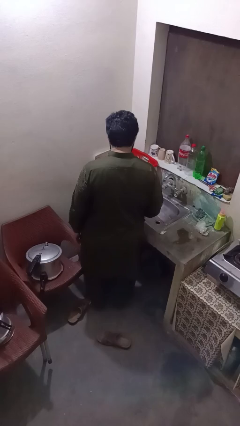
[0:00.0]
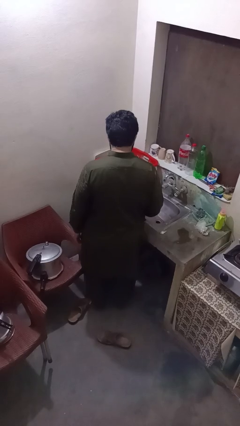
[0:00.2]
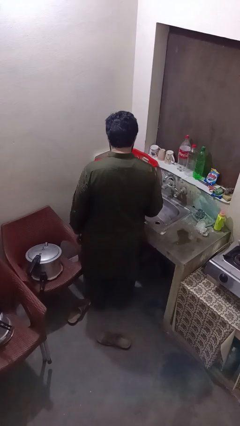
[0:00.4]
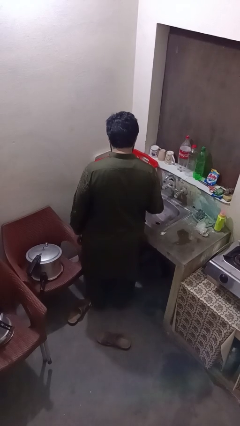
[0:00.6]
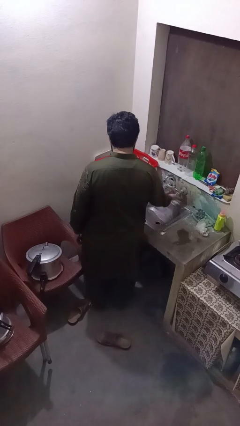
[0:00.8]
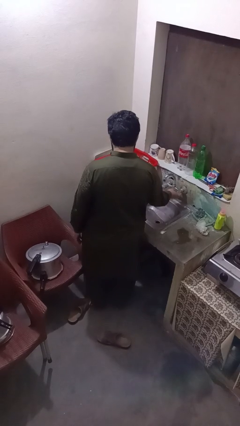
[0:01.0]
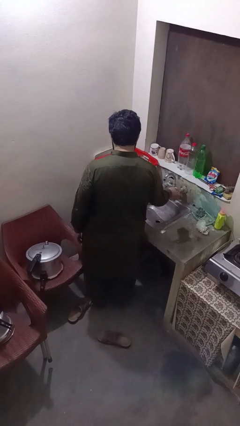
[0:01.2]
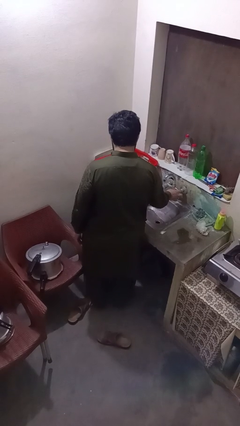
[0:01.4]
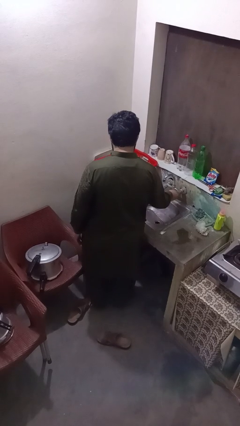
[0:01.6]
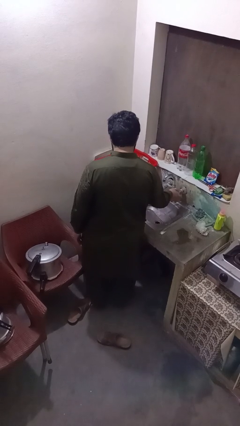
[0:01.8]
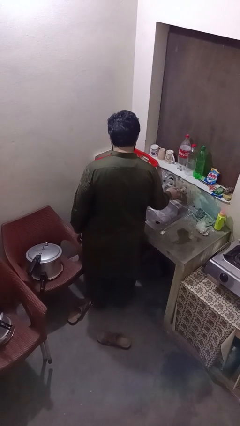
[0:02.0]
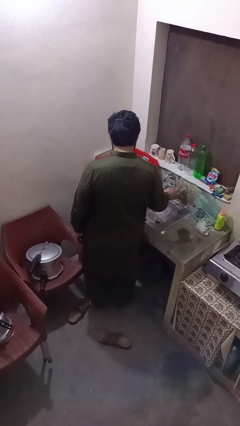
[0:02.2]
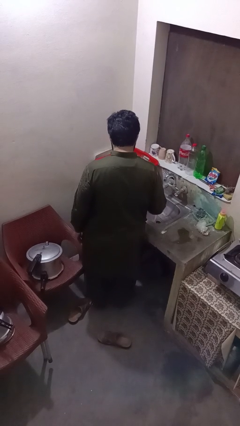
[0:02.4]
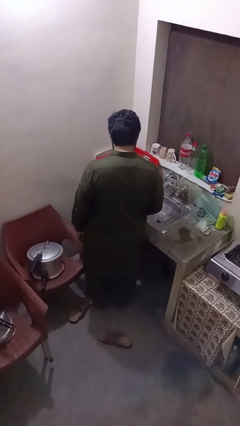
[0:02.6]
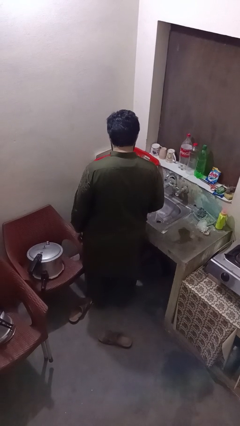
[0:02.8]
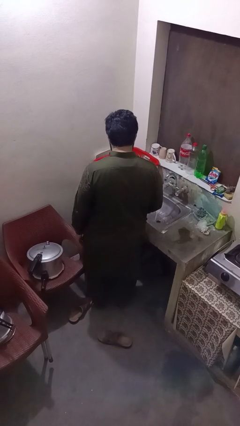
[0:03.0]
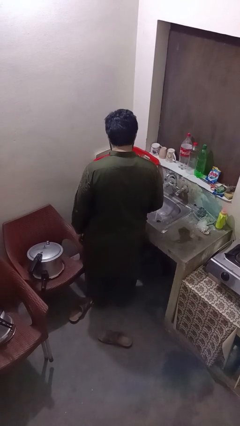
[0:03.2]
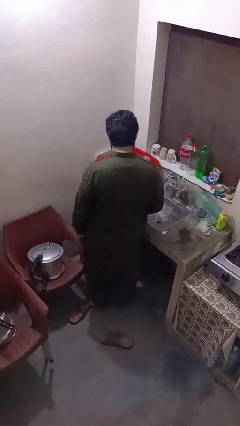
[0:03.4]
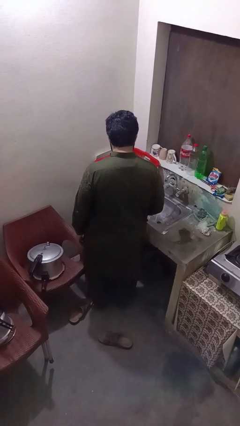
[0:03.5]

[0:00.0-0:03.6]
person turns on faucet

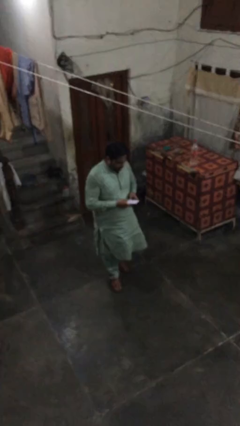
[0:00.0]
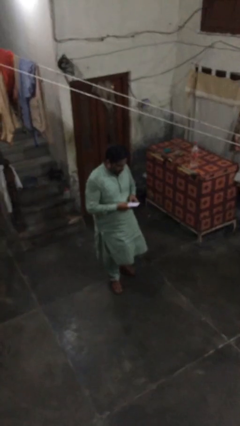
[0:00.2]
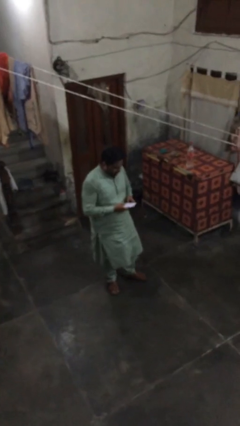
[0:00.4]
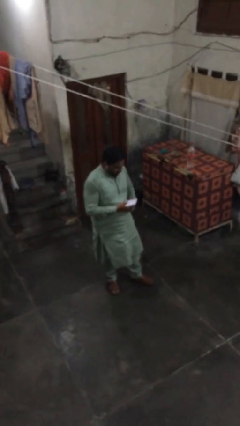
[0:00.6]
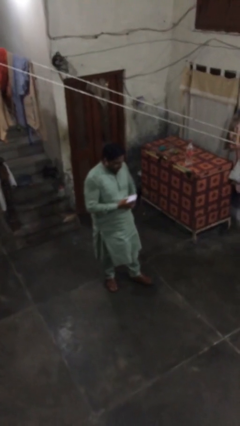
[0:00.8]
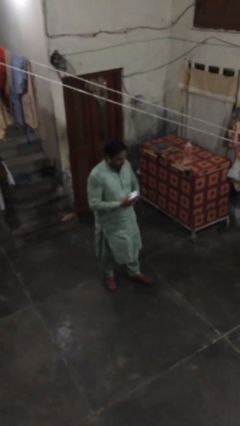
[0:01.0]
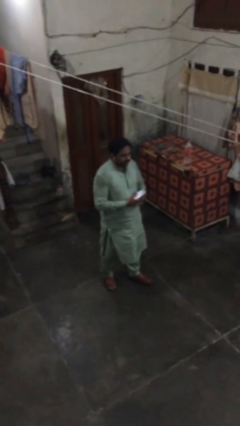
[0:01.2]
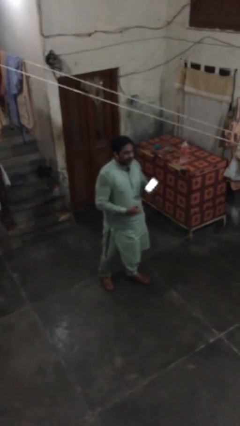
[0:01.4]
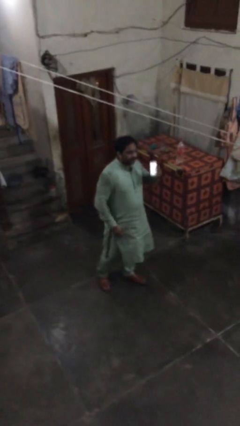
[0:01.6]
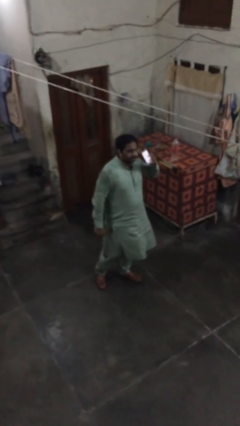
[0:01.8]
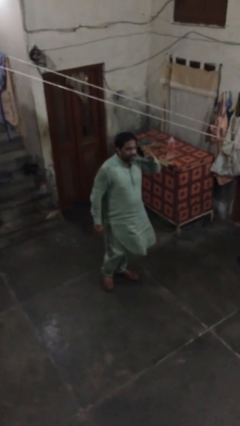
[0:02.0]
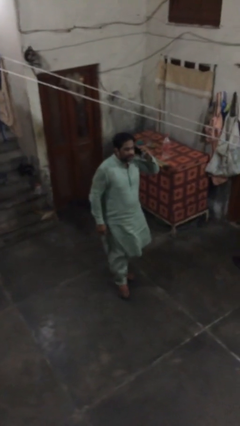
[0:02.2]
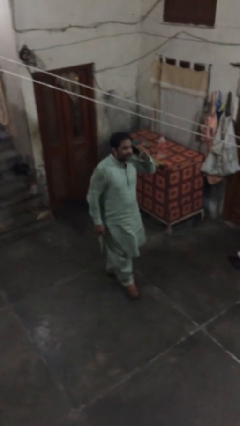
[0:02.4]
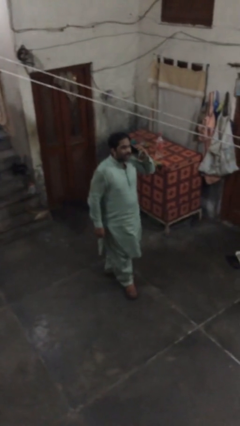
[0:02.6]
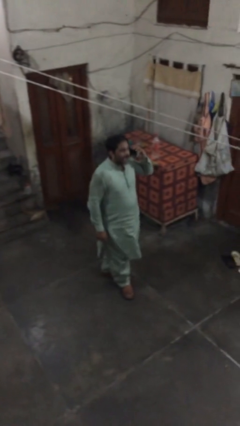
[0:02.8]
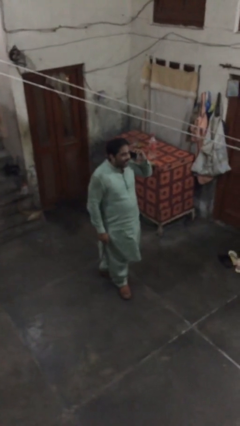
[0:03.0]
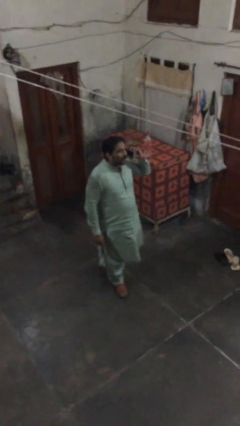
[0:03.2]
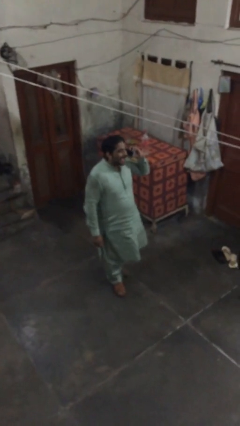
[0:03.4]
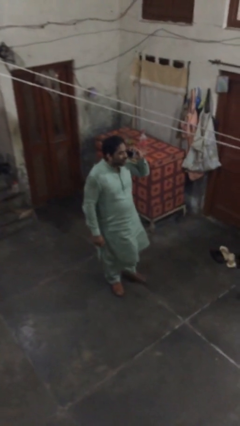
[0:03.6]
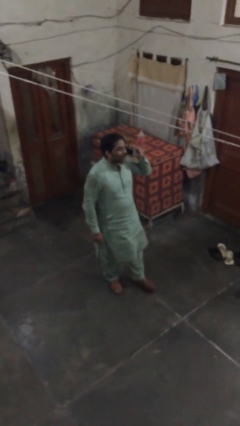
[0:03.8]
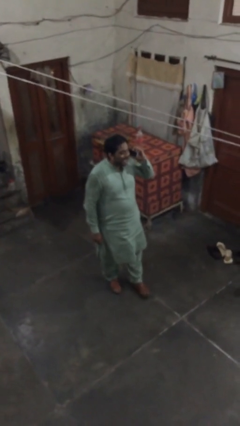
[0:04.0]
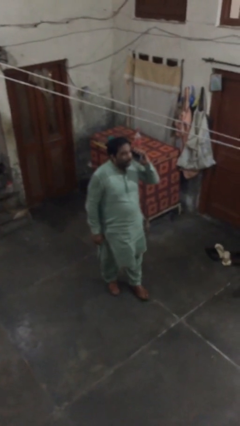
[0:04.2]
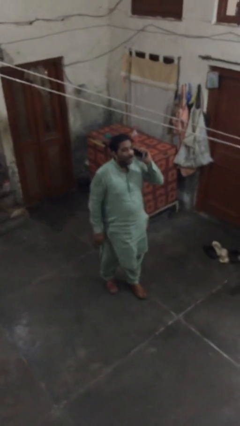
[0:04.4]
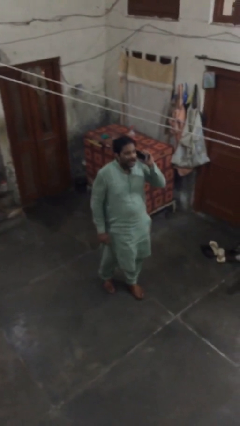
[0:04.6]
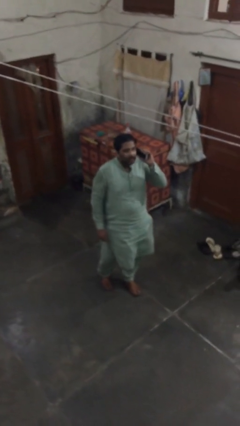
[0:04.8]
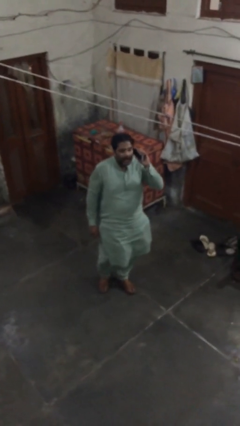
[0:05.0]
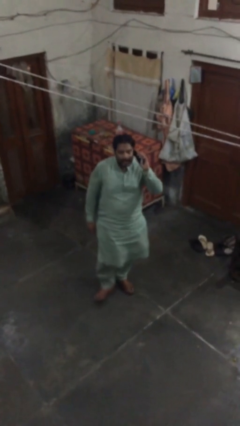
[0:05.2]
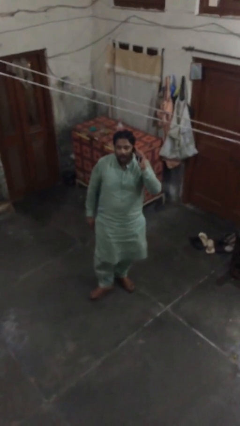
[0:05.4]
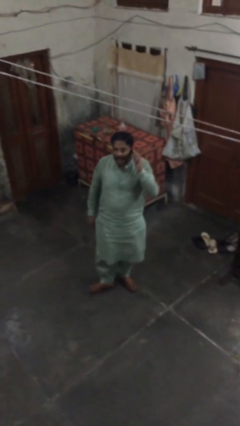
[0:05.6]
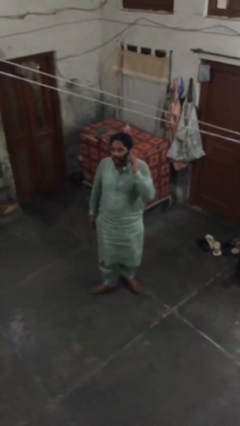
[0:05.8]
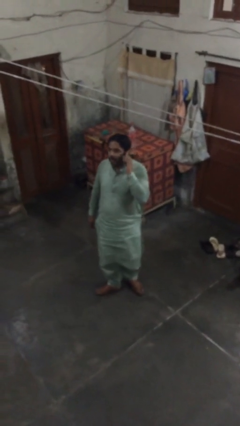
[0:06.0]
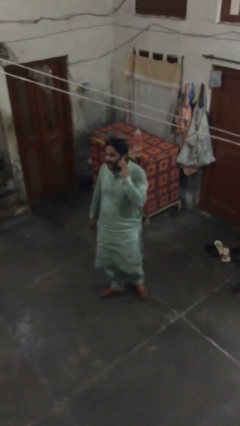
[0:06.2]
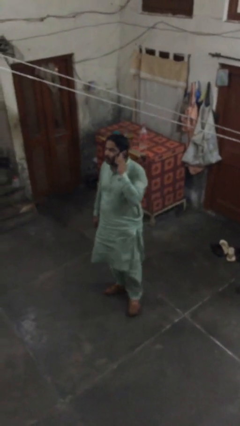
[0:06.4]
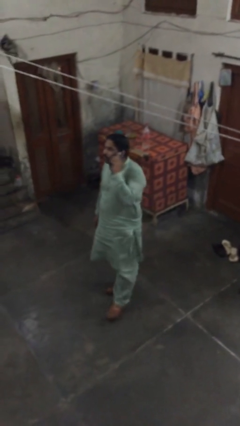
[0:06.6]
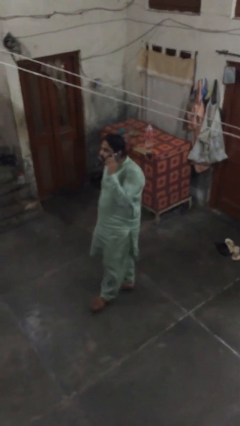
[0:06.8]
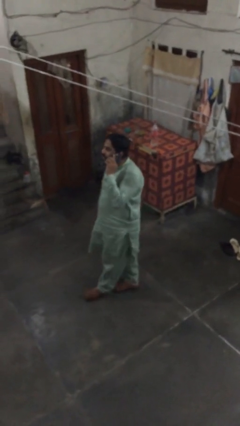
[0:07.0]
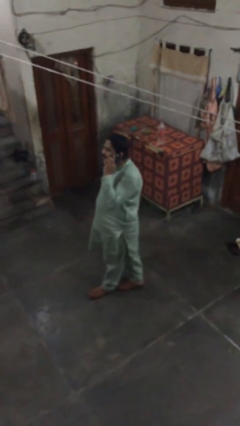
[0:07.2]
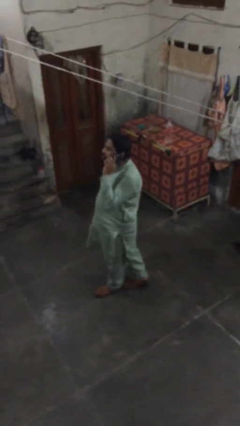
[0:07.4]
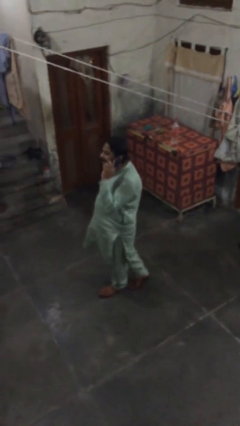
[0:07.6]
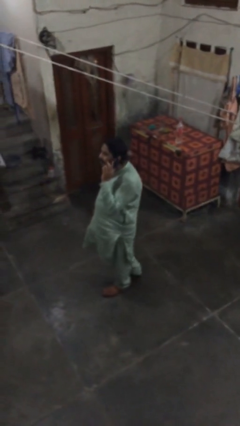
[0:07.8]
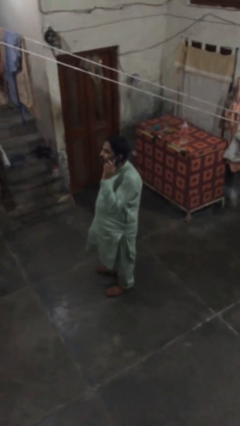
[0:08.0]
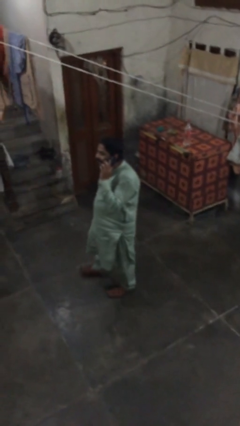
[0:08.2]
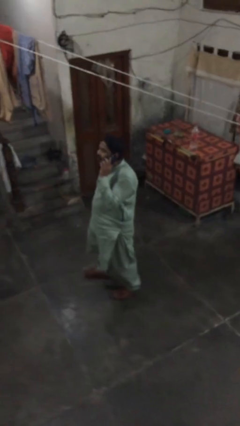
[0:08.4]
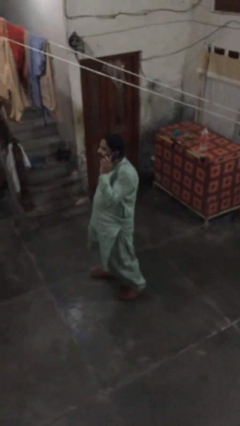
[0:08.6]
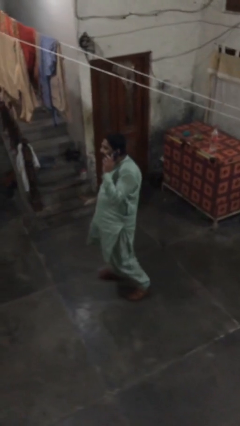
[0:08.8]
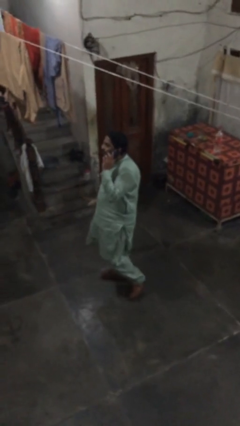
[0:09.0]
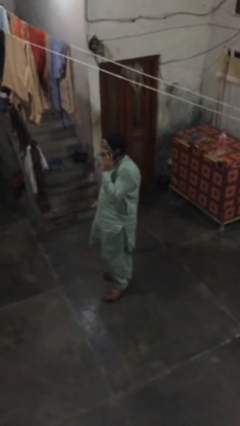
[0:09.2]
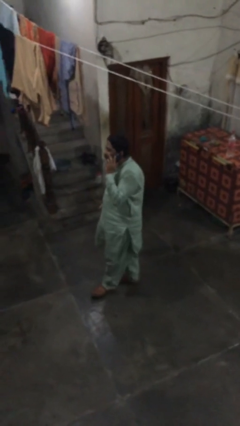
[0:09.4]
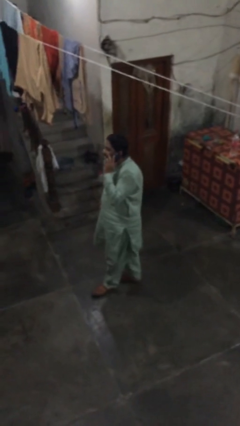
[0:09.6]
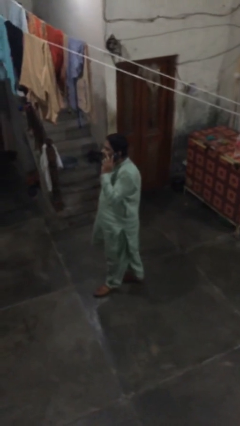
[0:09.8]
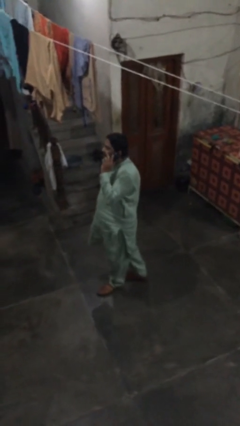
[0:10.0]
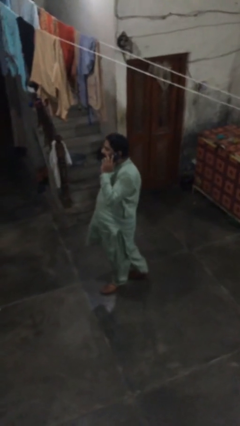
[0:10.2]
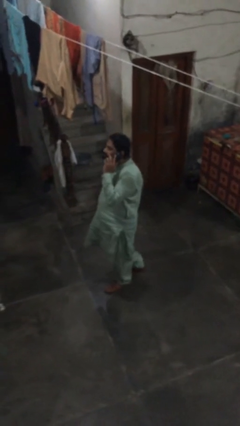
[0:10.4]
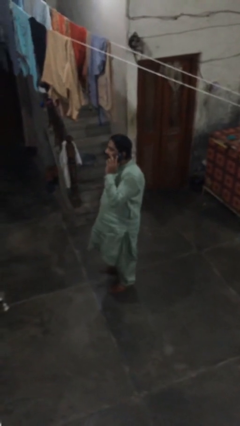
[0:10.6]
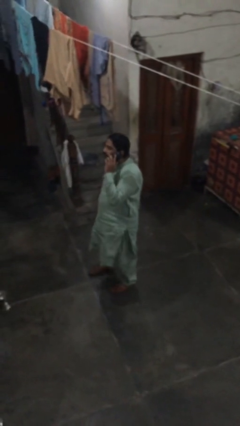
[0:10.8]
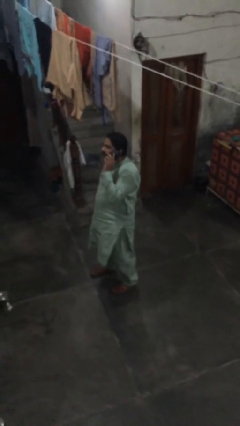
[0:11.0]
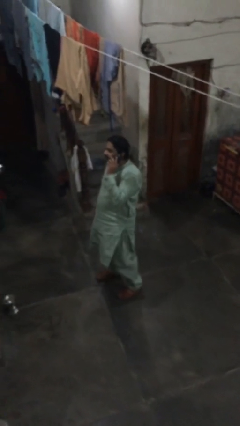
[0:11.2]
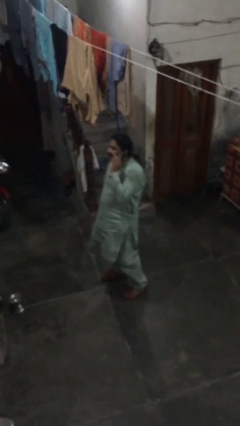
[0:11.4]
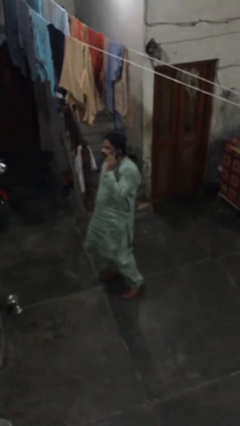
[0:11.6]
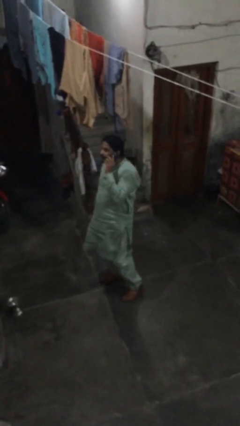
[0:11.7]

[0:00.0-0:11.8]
person talks on phone

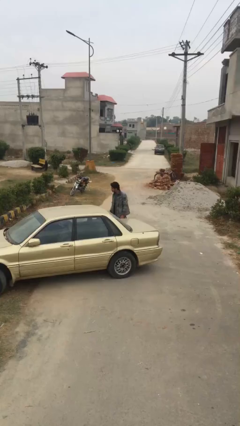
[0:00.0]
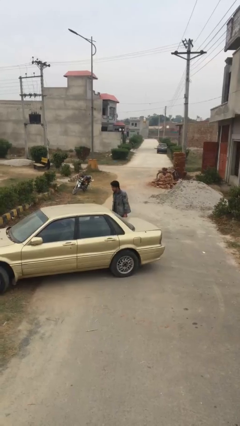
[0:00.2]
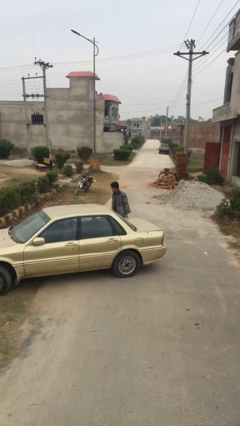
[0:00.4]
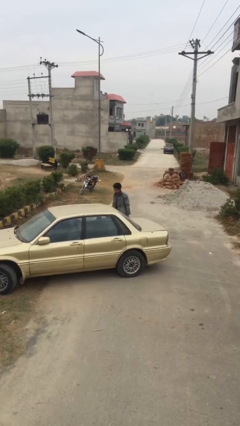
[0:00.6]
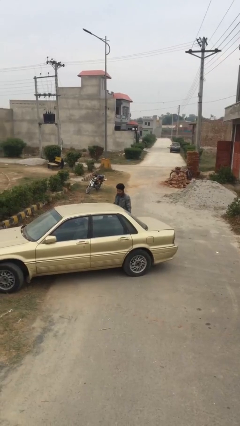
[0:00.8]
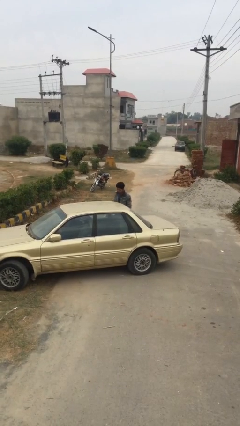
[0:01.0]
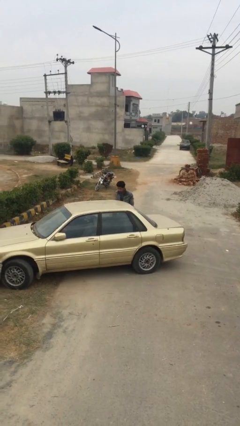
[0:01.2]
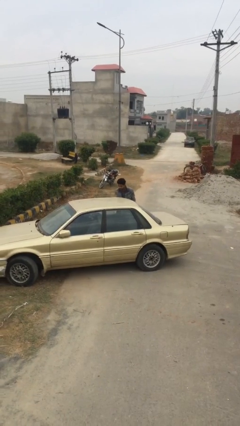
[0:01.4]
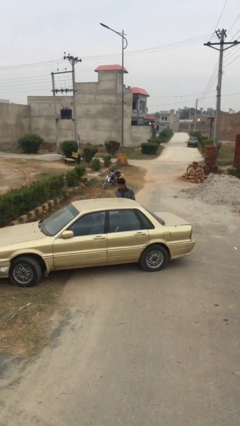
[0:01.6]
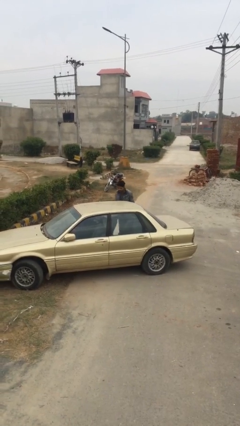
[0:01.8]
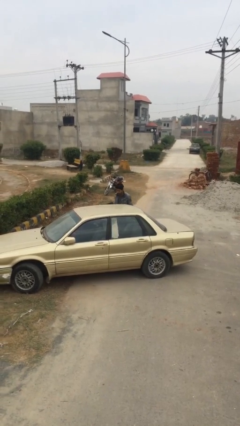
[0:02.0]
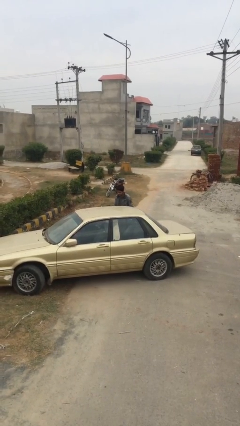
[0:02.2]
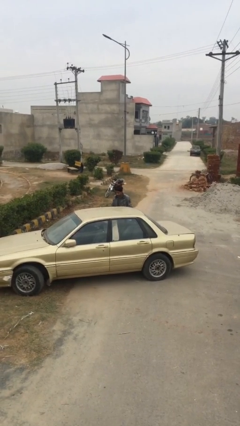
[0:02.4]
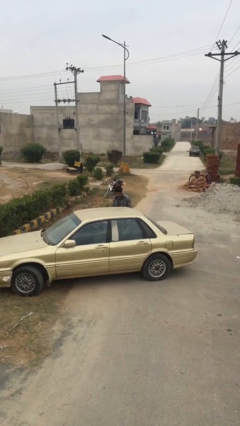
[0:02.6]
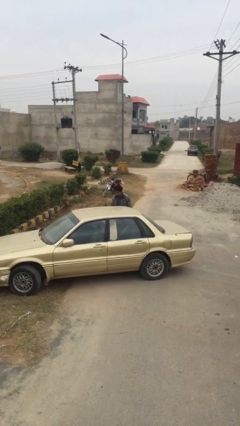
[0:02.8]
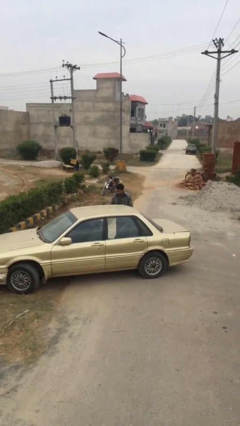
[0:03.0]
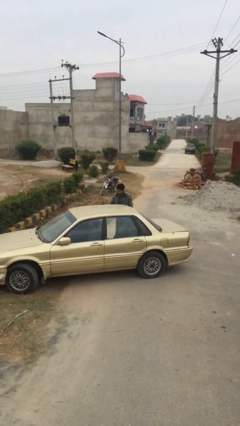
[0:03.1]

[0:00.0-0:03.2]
person opens car door
